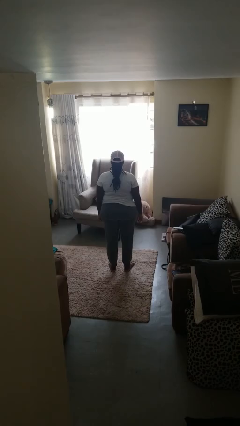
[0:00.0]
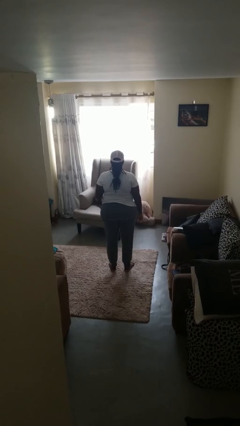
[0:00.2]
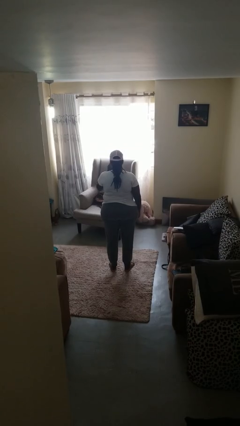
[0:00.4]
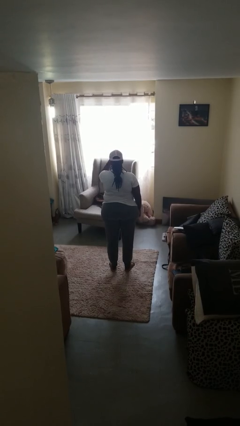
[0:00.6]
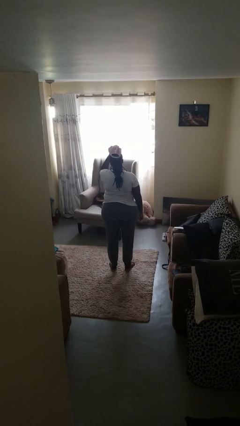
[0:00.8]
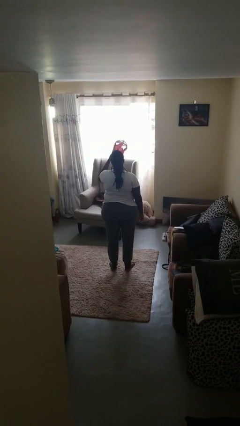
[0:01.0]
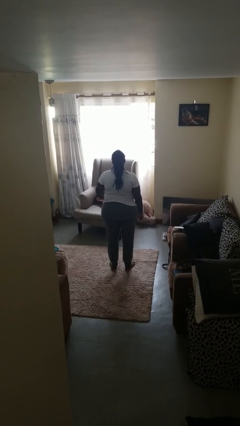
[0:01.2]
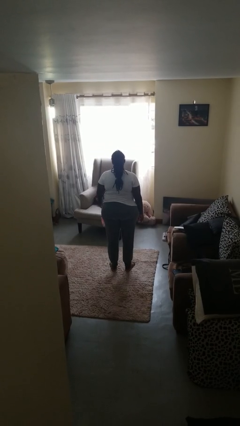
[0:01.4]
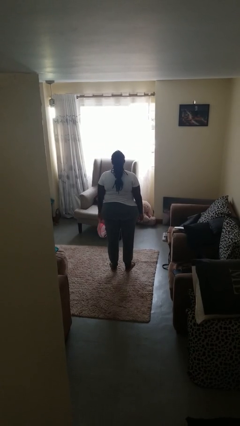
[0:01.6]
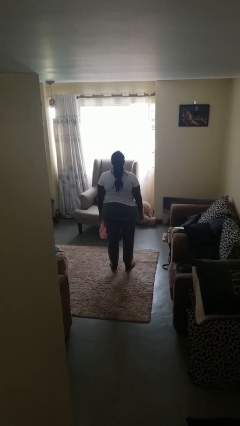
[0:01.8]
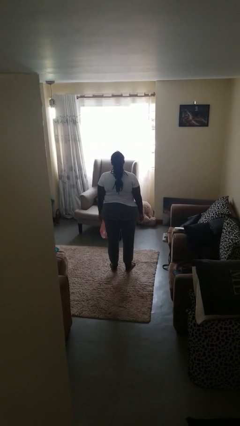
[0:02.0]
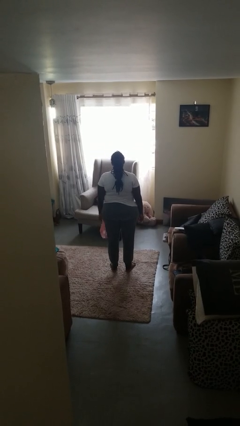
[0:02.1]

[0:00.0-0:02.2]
person takes off hat

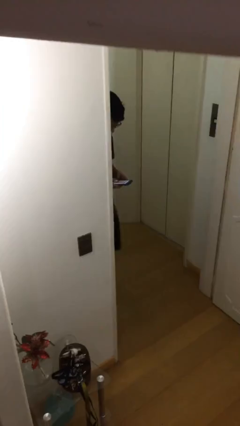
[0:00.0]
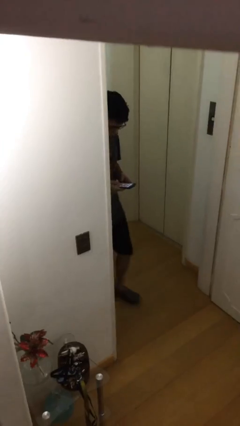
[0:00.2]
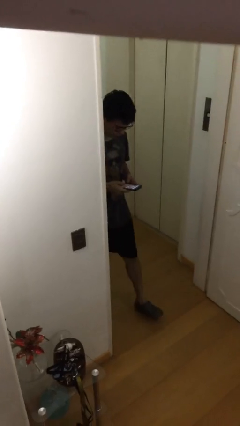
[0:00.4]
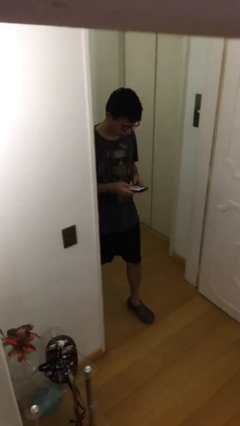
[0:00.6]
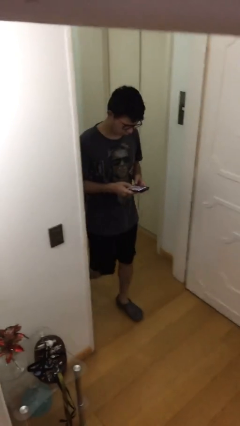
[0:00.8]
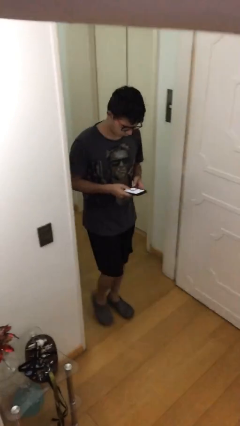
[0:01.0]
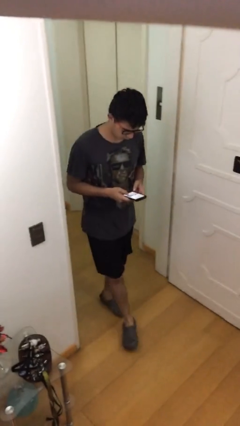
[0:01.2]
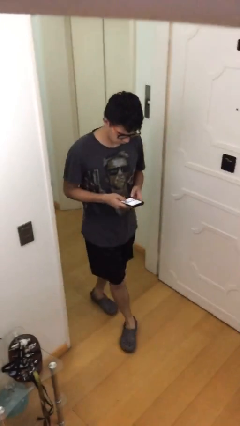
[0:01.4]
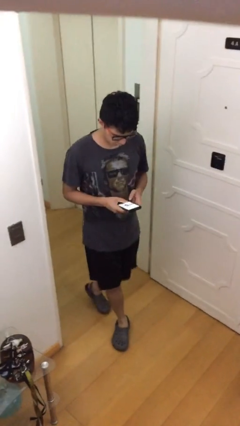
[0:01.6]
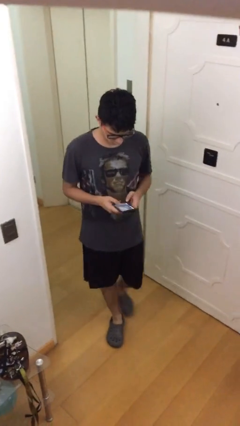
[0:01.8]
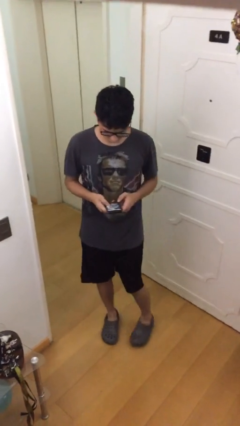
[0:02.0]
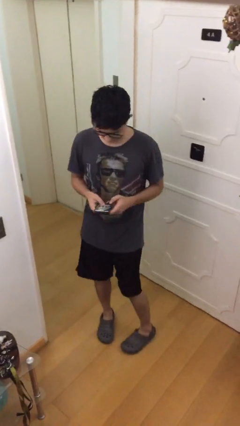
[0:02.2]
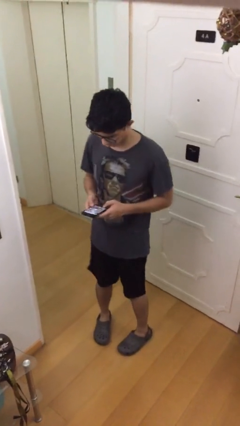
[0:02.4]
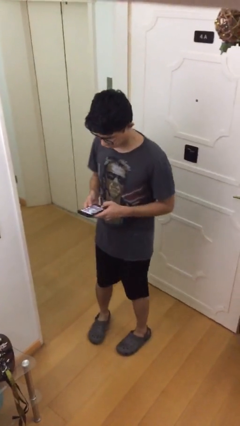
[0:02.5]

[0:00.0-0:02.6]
person enters scene through structure

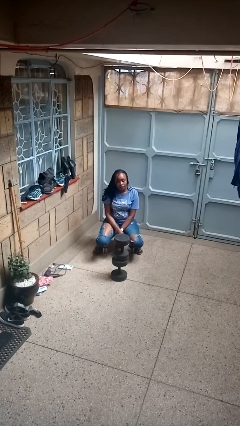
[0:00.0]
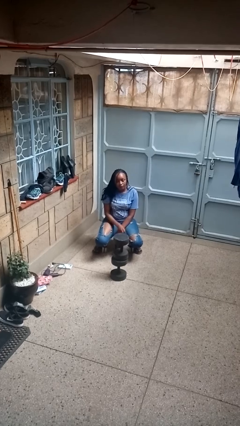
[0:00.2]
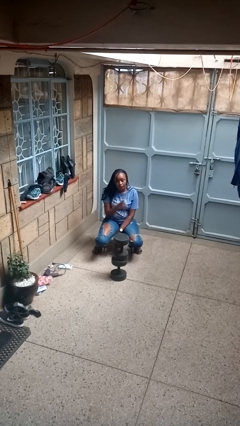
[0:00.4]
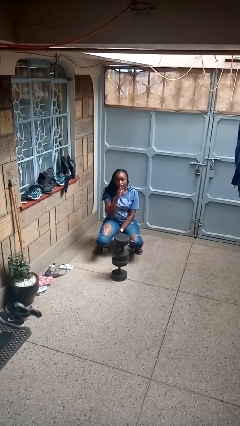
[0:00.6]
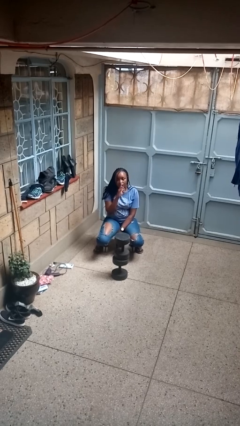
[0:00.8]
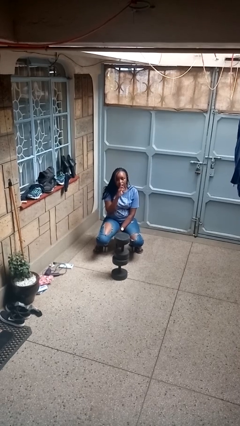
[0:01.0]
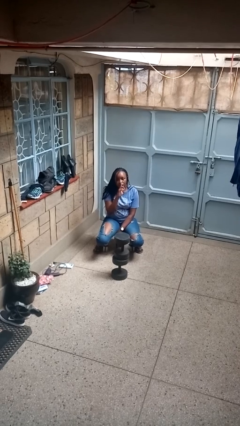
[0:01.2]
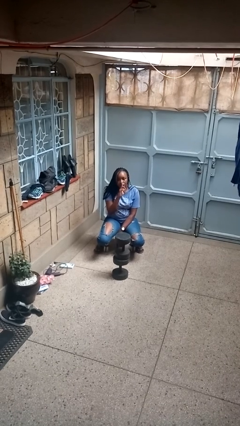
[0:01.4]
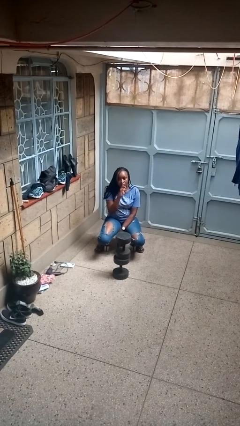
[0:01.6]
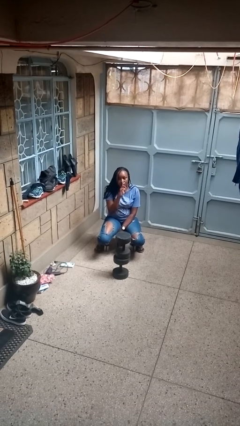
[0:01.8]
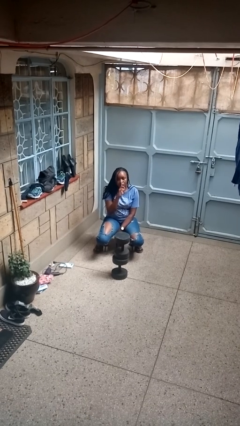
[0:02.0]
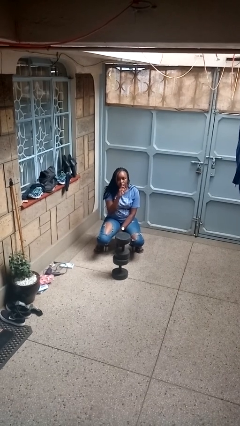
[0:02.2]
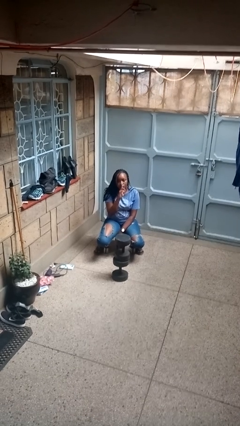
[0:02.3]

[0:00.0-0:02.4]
person gestures be quiet

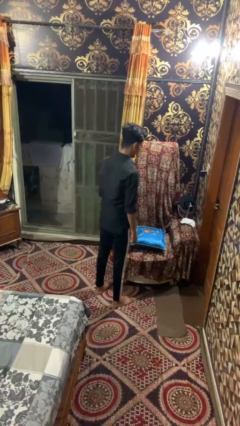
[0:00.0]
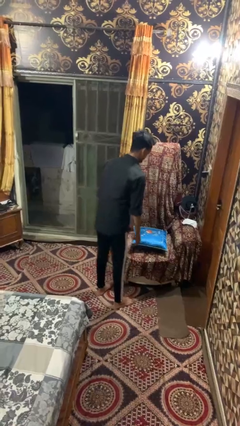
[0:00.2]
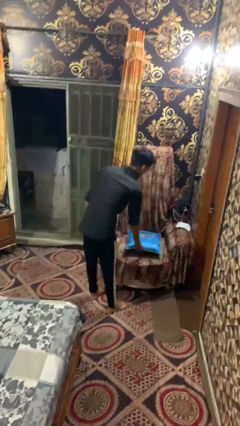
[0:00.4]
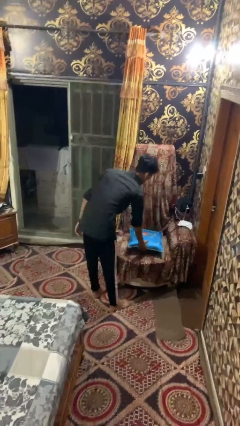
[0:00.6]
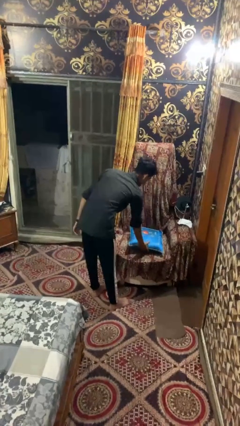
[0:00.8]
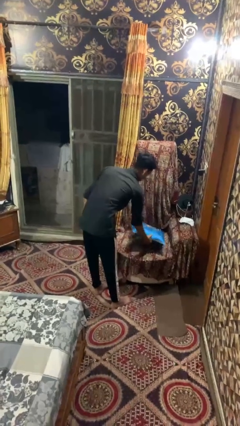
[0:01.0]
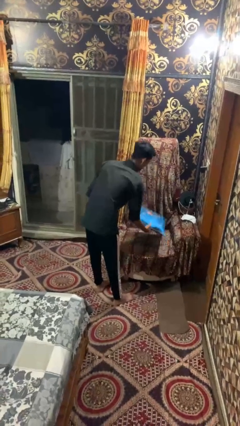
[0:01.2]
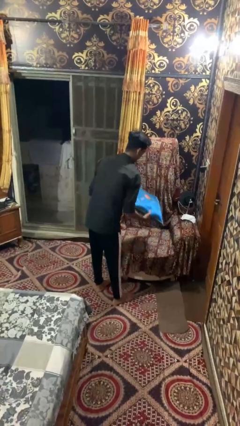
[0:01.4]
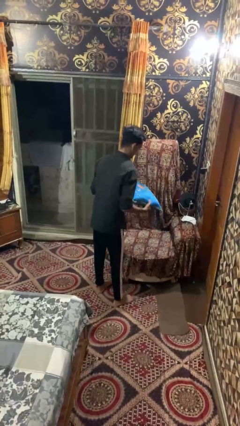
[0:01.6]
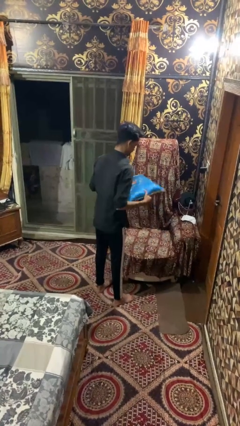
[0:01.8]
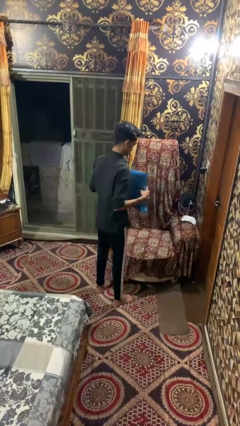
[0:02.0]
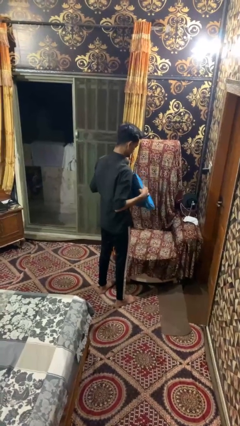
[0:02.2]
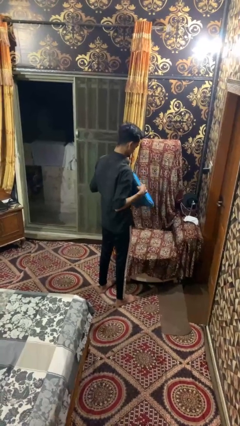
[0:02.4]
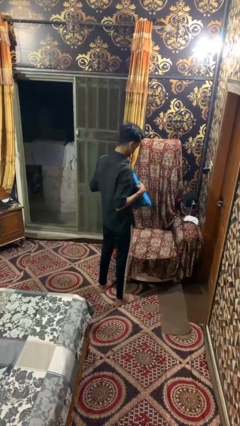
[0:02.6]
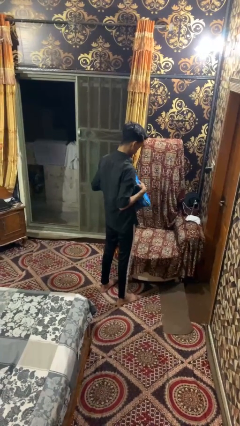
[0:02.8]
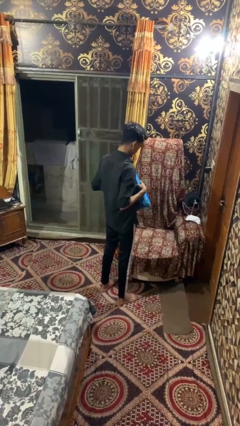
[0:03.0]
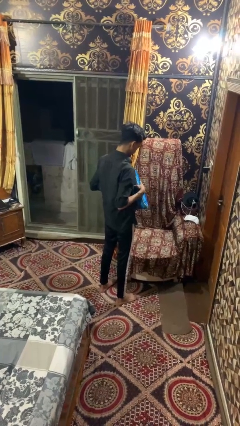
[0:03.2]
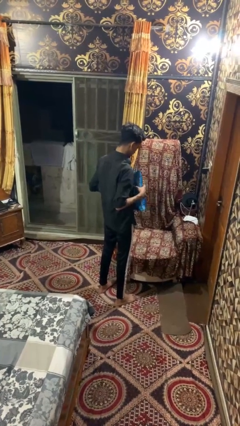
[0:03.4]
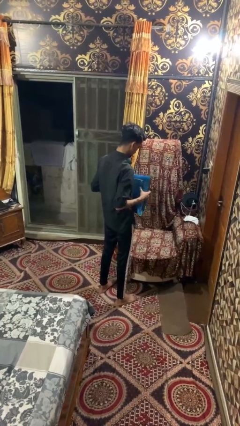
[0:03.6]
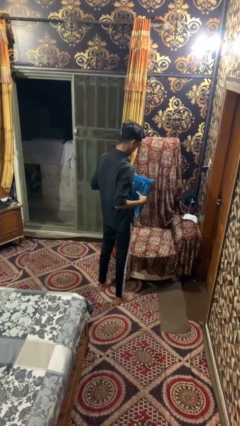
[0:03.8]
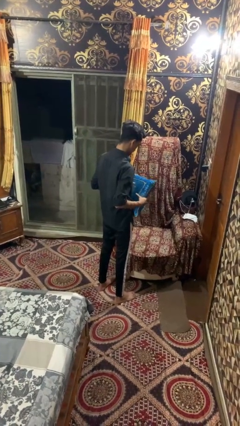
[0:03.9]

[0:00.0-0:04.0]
person picks up object from couch

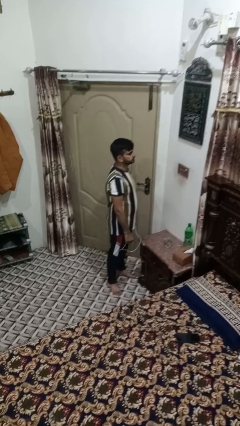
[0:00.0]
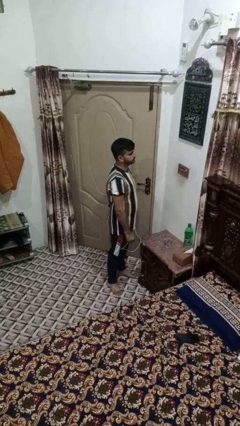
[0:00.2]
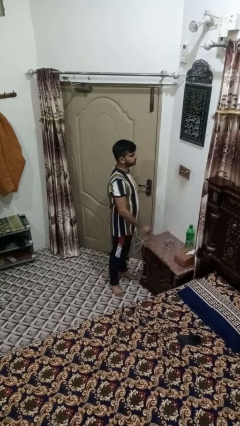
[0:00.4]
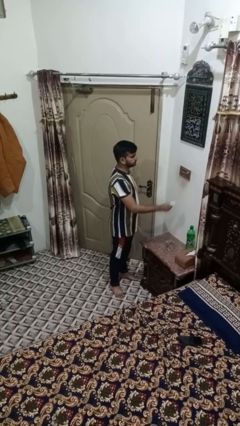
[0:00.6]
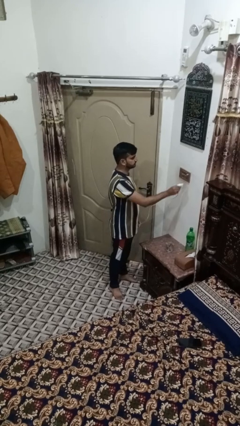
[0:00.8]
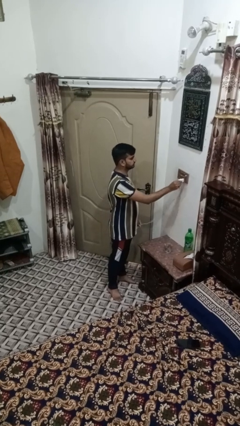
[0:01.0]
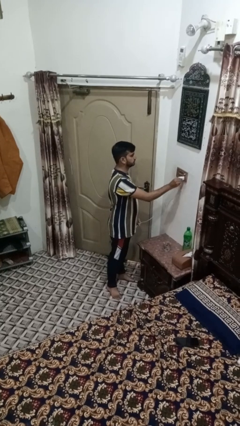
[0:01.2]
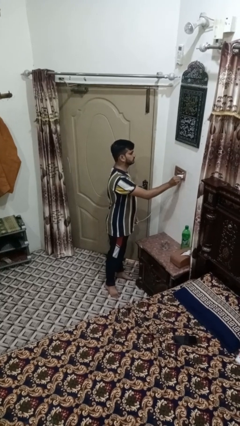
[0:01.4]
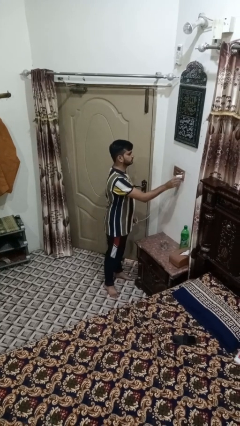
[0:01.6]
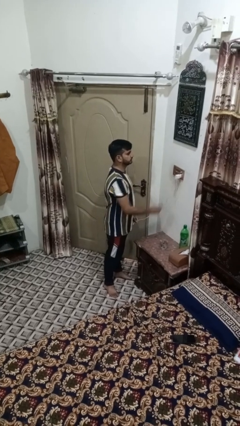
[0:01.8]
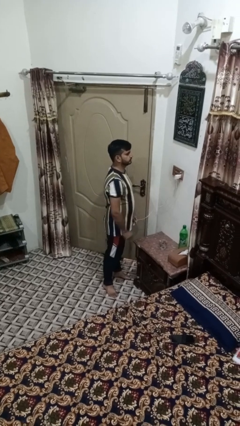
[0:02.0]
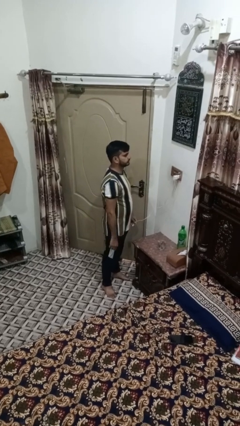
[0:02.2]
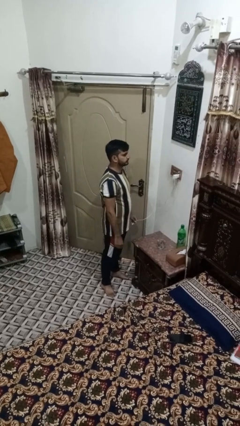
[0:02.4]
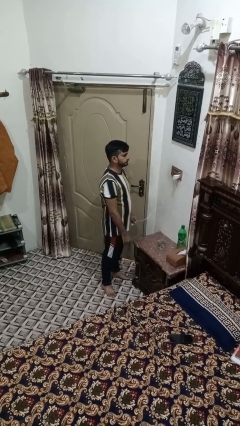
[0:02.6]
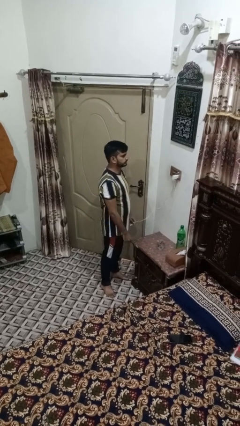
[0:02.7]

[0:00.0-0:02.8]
person plugs into electrical socket

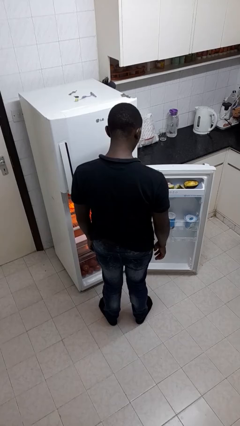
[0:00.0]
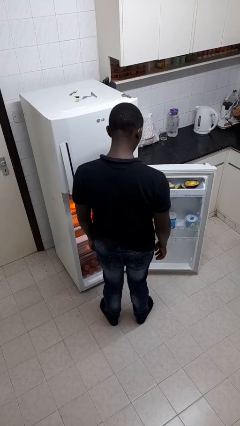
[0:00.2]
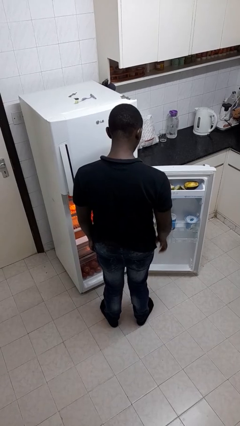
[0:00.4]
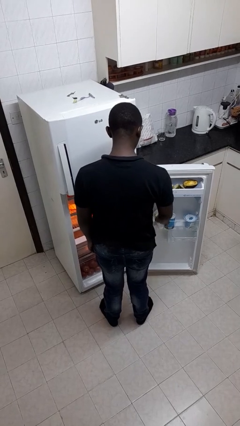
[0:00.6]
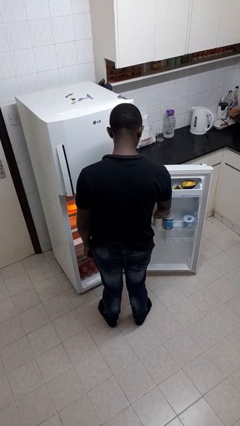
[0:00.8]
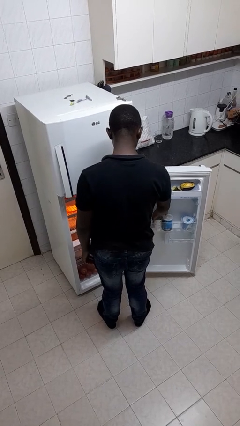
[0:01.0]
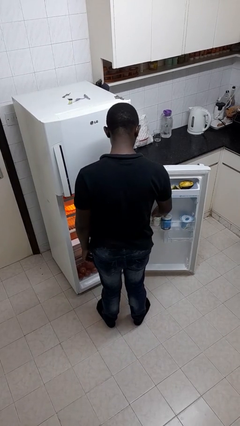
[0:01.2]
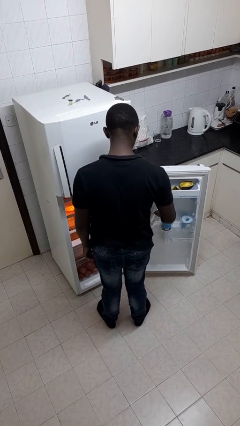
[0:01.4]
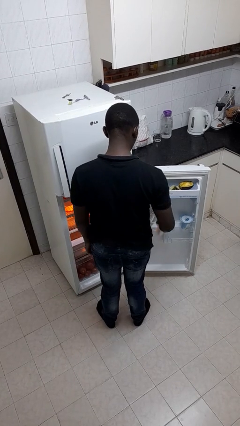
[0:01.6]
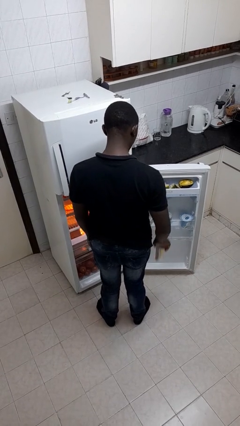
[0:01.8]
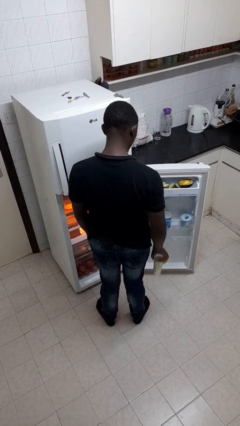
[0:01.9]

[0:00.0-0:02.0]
person takes object from refrigerator

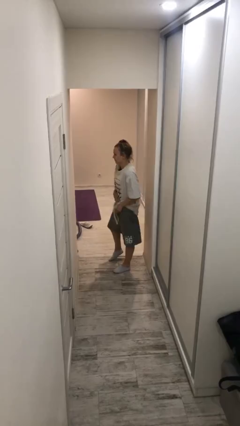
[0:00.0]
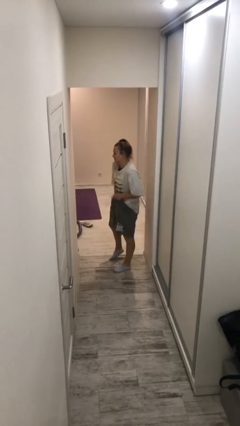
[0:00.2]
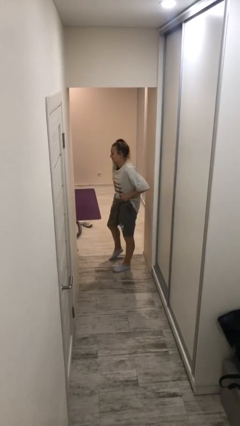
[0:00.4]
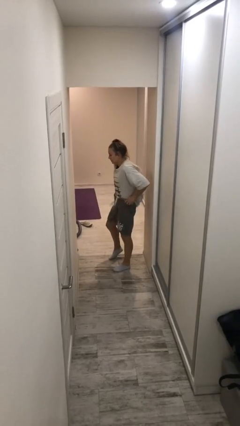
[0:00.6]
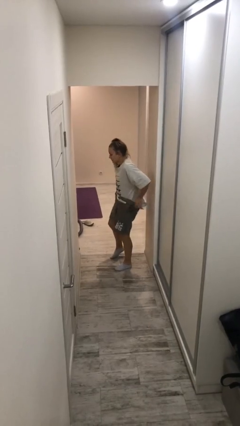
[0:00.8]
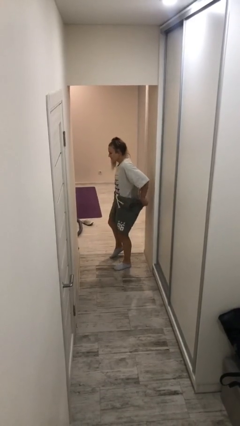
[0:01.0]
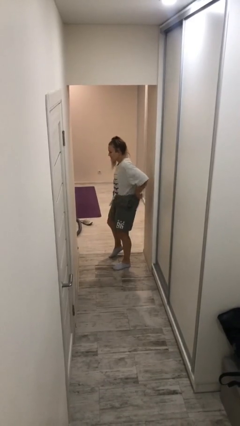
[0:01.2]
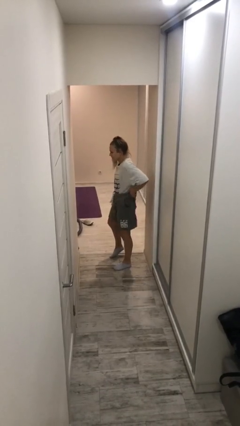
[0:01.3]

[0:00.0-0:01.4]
person tucks in shirt
